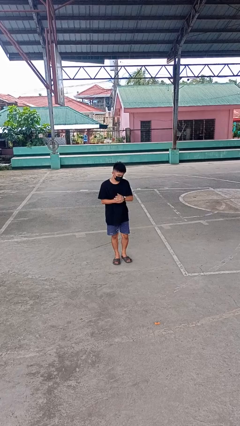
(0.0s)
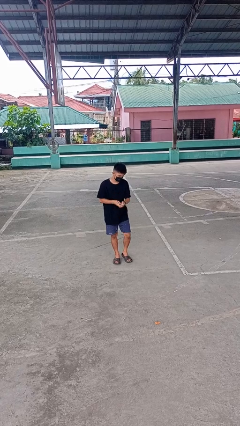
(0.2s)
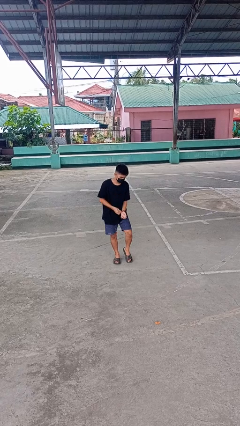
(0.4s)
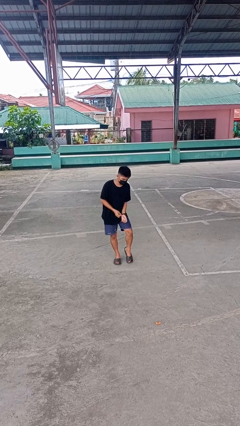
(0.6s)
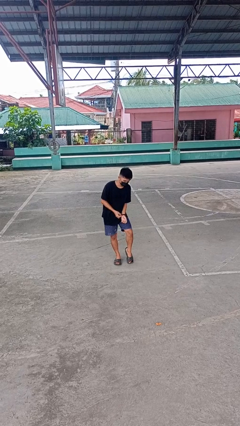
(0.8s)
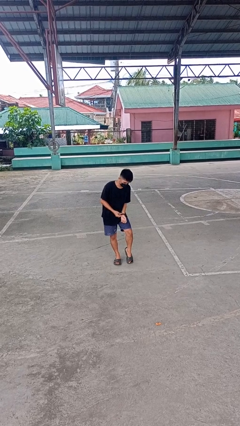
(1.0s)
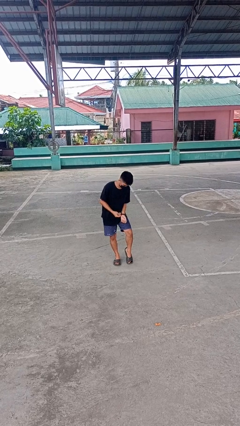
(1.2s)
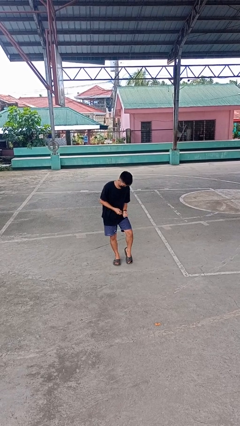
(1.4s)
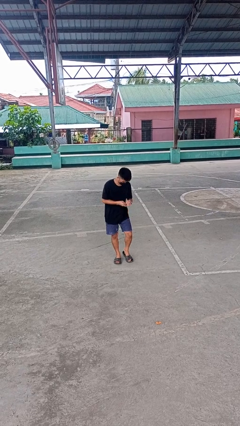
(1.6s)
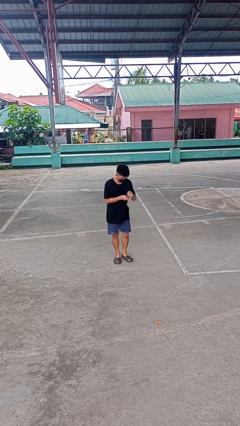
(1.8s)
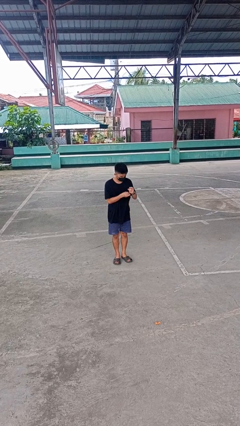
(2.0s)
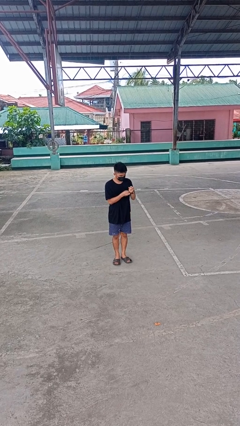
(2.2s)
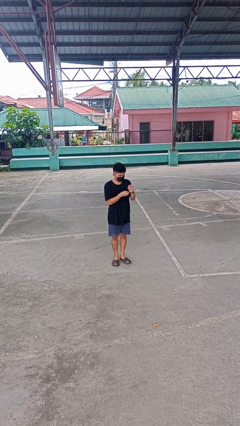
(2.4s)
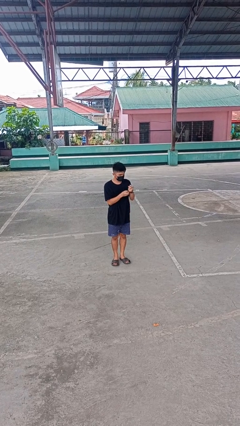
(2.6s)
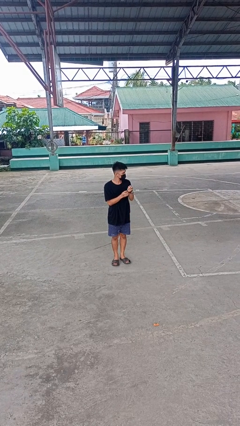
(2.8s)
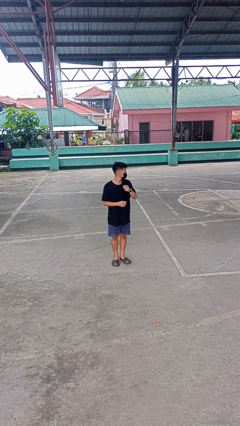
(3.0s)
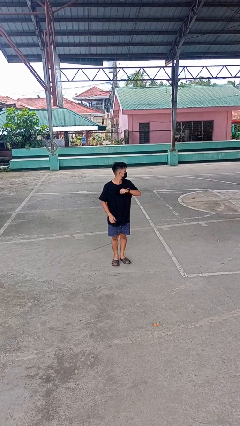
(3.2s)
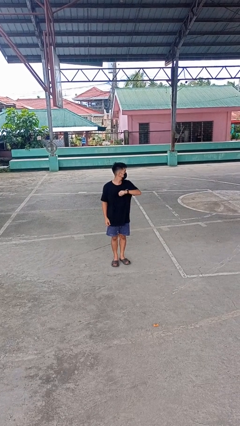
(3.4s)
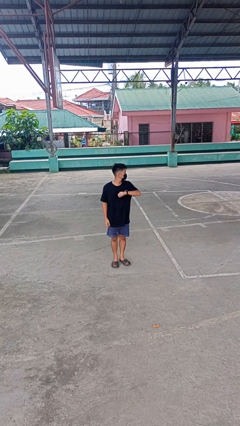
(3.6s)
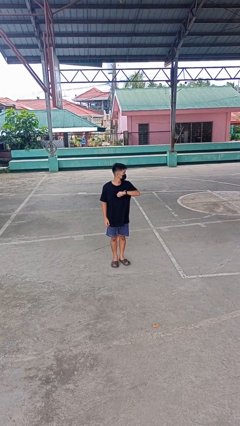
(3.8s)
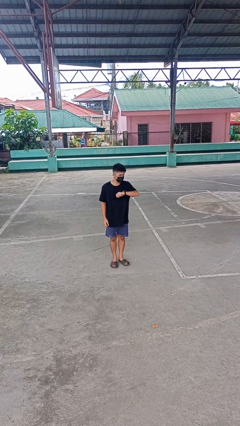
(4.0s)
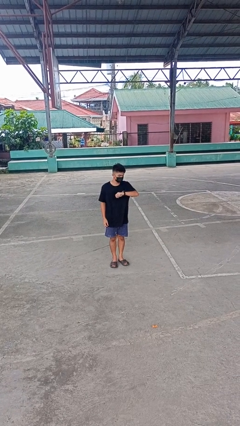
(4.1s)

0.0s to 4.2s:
person puts on wristwatch

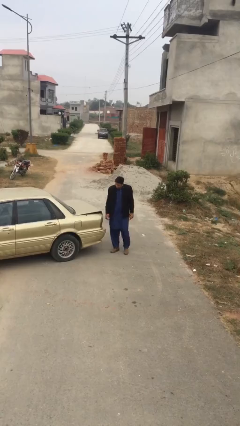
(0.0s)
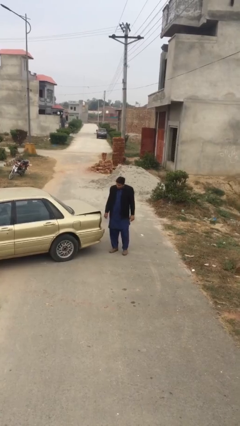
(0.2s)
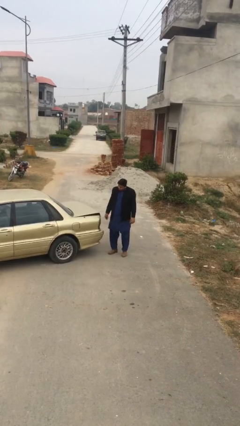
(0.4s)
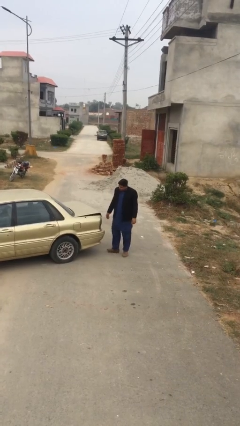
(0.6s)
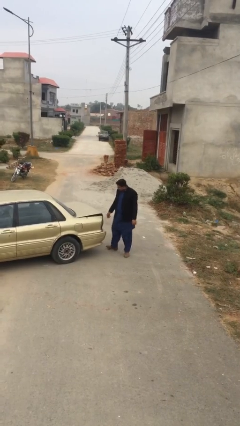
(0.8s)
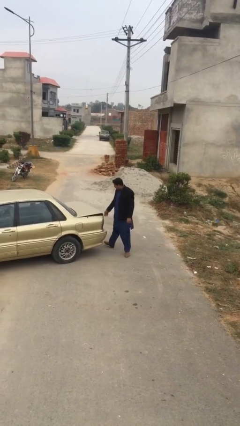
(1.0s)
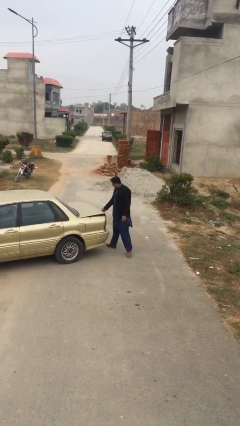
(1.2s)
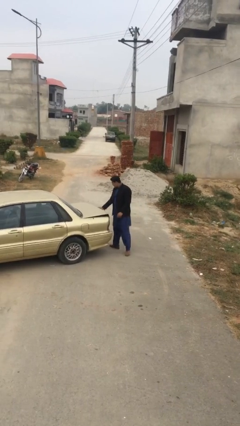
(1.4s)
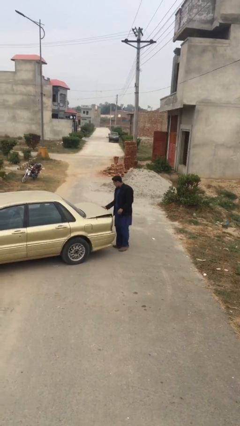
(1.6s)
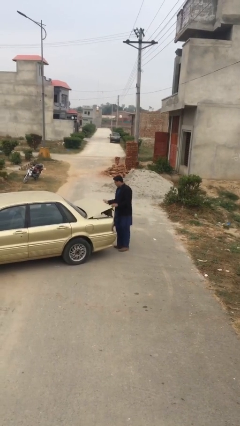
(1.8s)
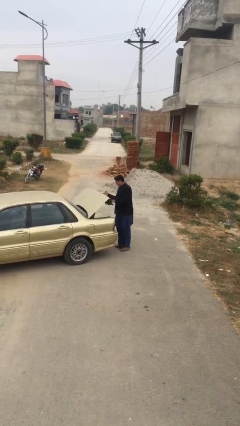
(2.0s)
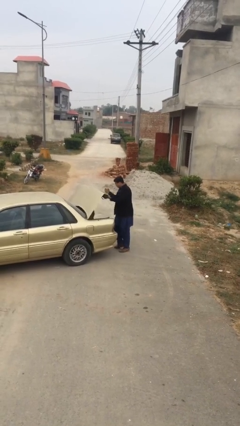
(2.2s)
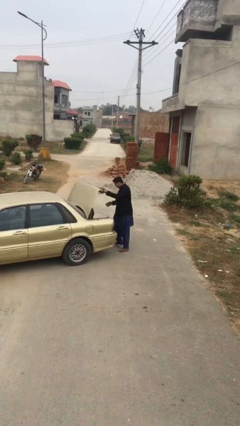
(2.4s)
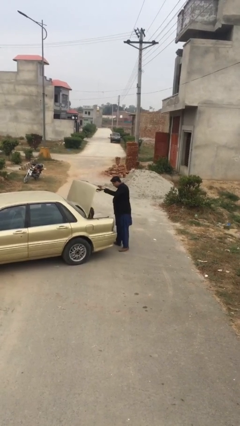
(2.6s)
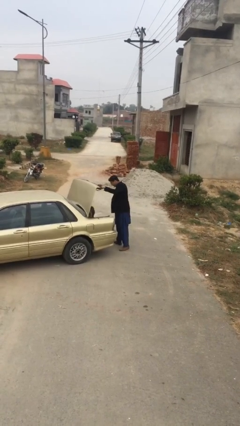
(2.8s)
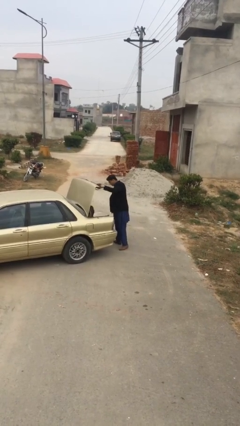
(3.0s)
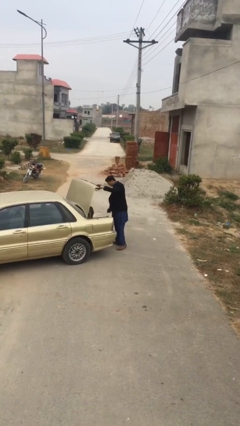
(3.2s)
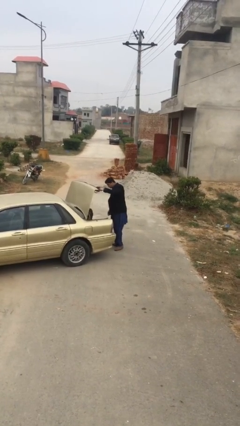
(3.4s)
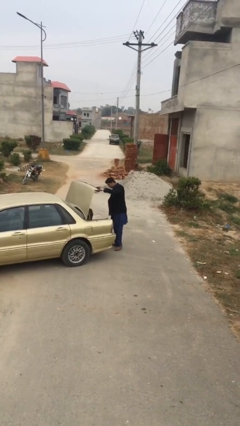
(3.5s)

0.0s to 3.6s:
person opens car trunk

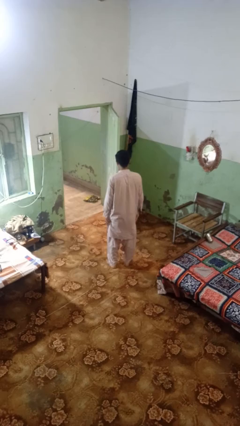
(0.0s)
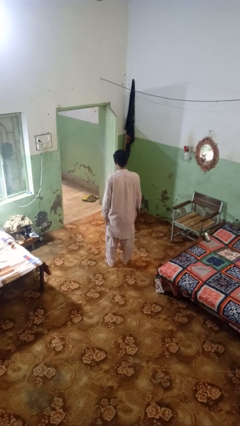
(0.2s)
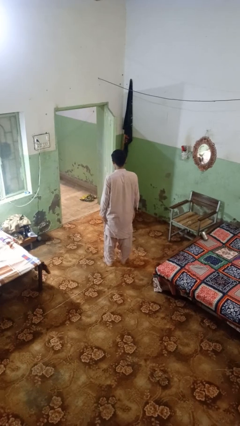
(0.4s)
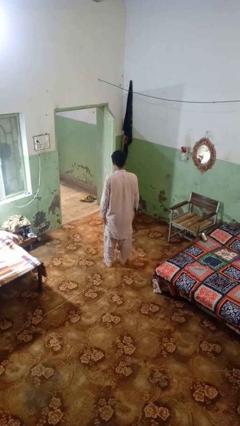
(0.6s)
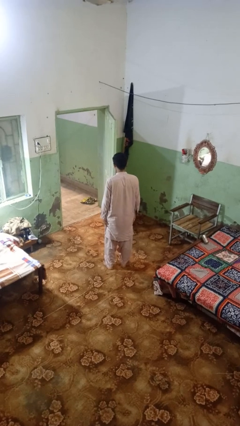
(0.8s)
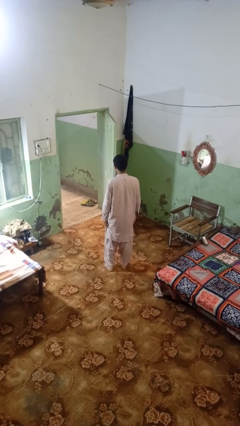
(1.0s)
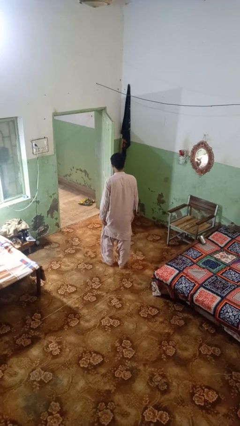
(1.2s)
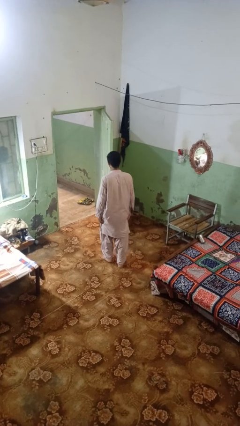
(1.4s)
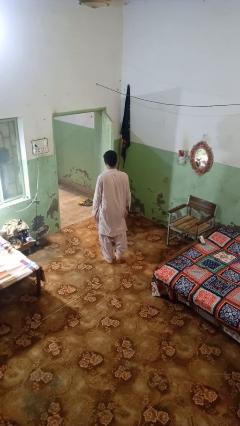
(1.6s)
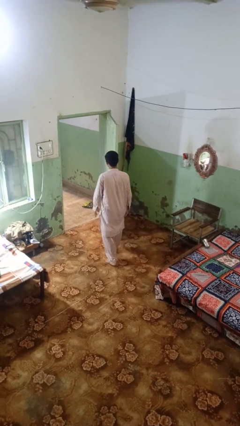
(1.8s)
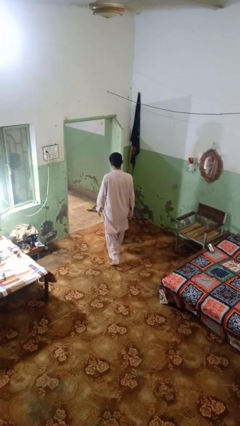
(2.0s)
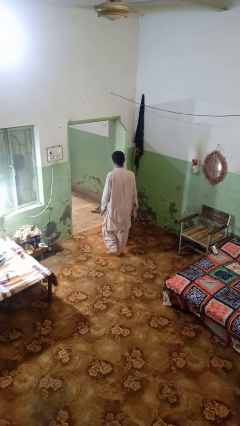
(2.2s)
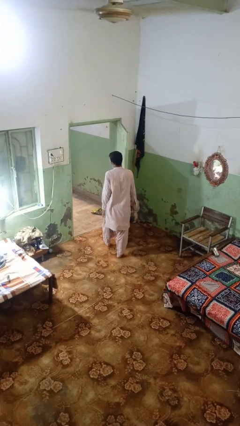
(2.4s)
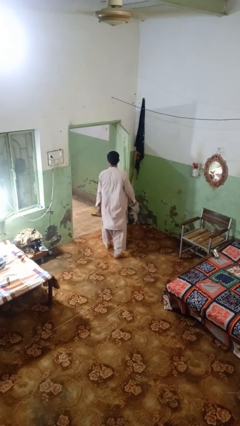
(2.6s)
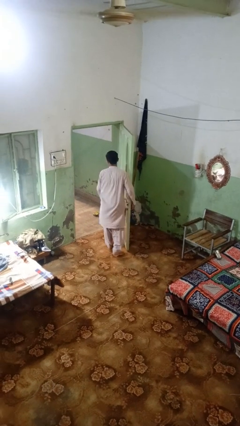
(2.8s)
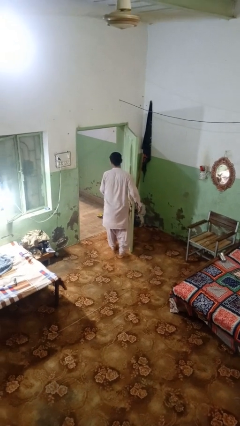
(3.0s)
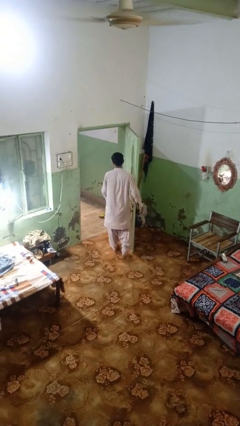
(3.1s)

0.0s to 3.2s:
person bumps into wall

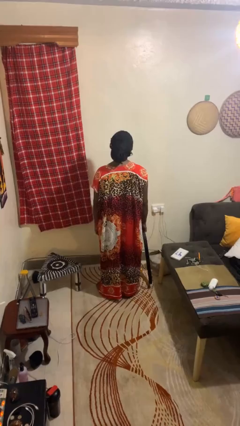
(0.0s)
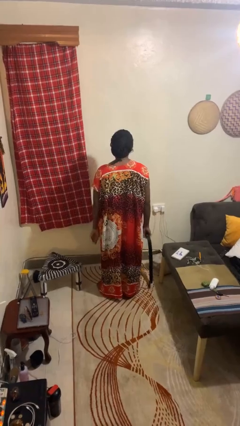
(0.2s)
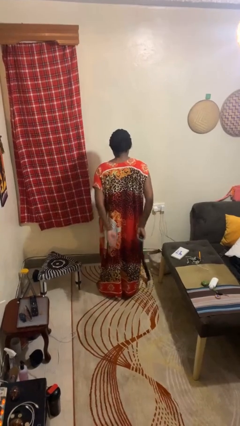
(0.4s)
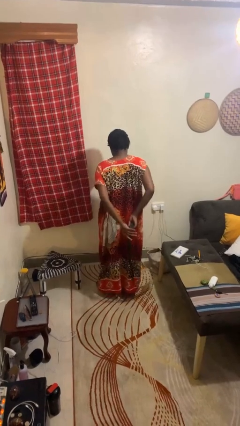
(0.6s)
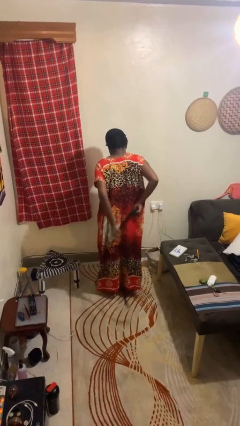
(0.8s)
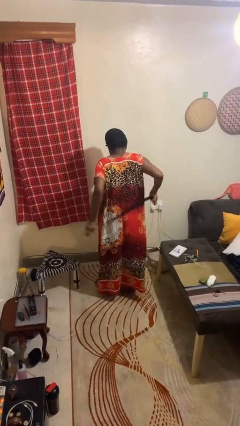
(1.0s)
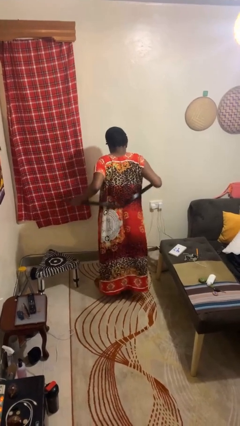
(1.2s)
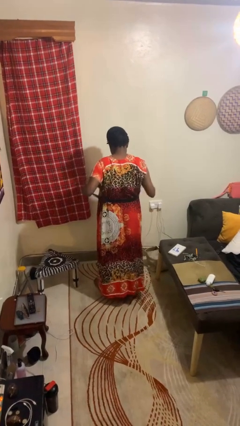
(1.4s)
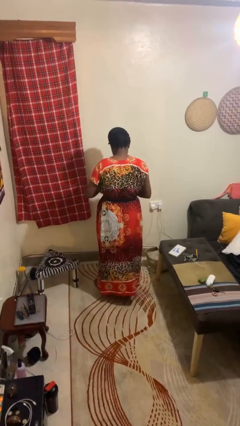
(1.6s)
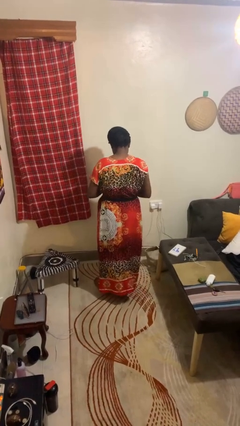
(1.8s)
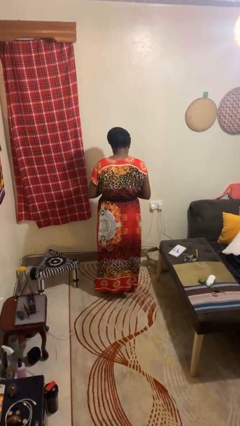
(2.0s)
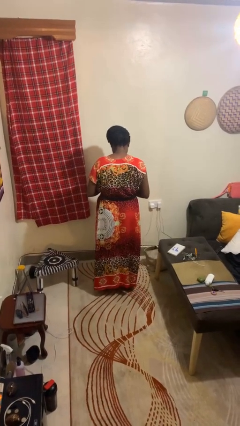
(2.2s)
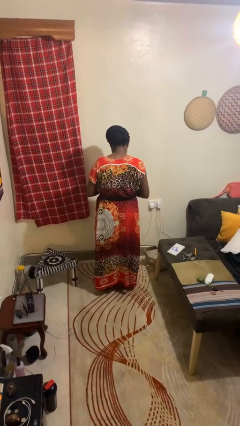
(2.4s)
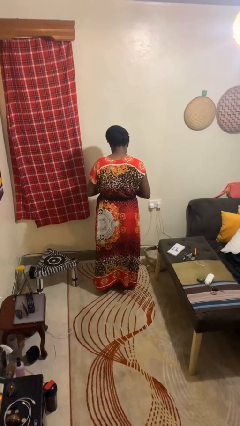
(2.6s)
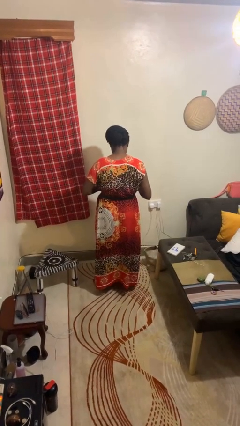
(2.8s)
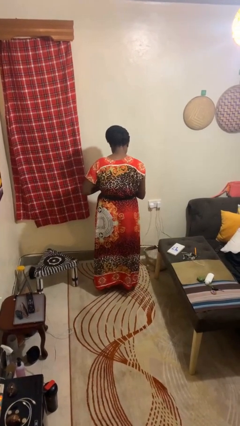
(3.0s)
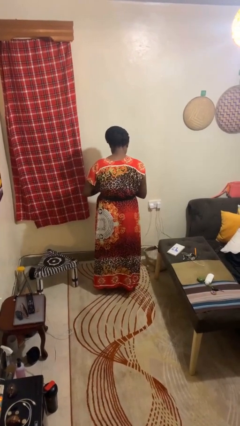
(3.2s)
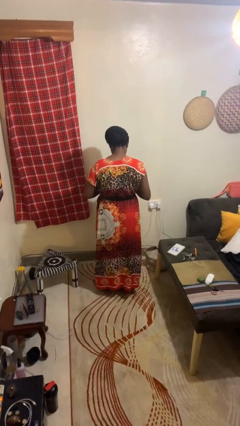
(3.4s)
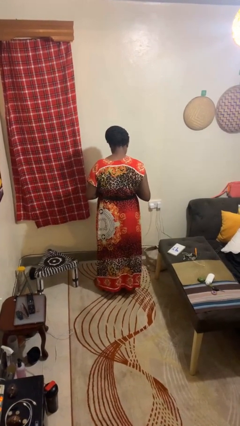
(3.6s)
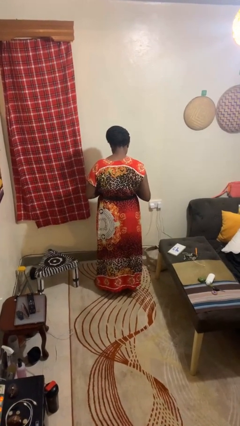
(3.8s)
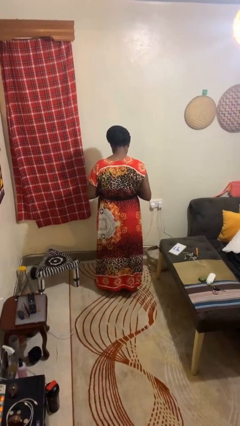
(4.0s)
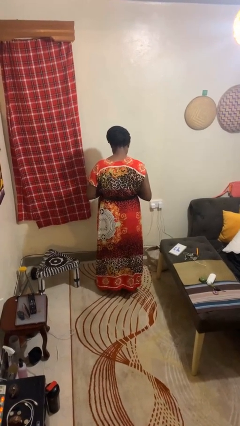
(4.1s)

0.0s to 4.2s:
person puts on belt

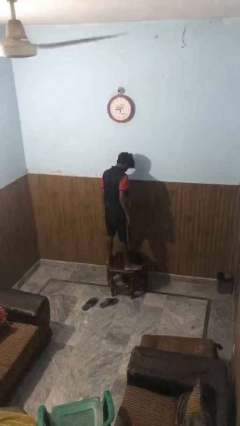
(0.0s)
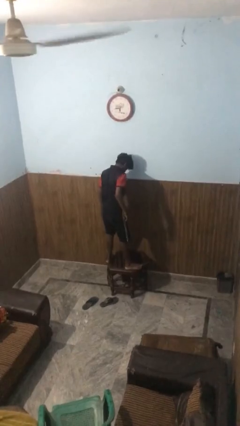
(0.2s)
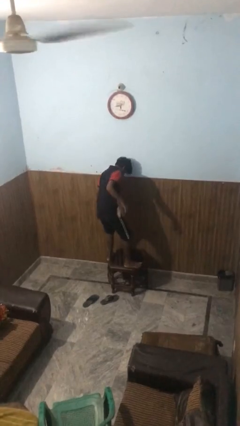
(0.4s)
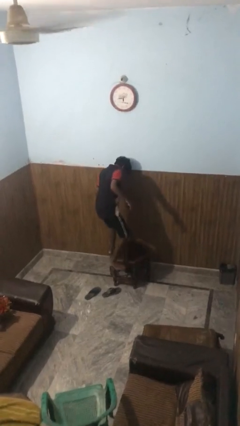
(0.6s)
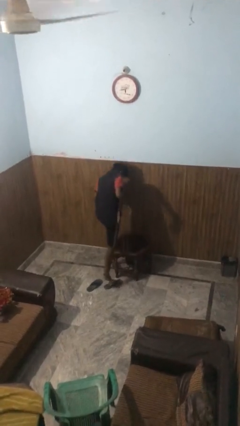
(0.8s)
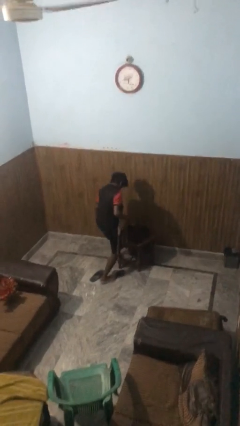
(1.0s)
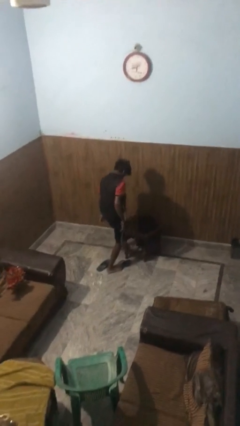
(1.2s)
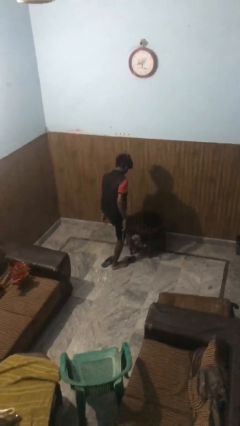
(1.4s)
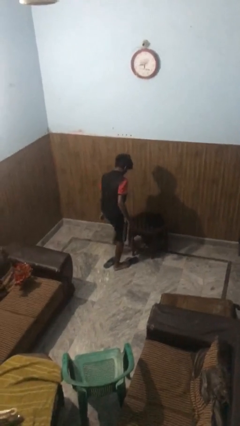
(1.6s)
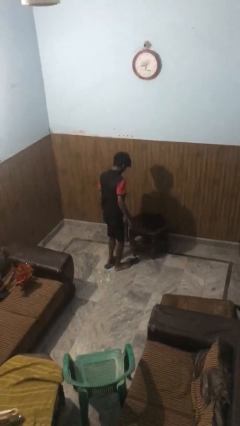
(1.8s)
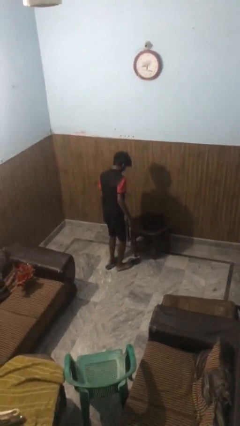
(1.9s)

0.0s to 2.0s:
person climbs off table

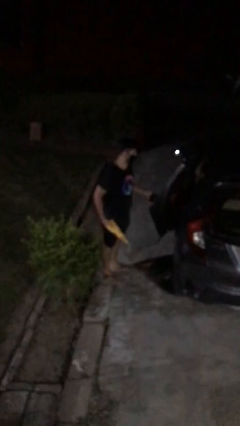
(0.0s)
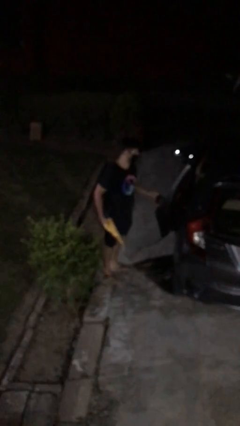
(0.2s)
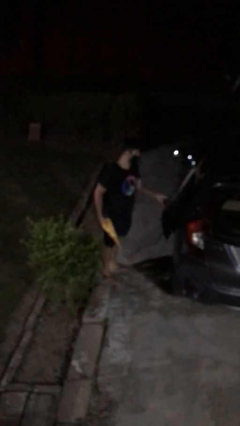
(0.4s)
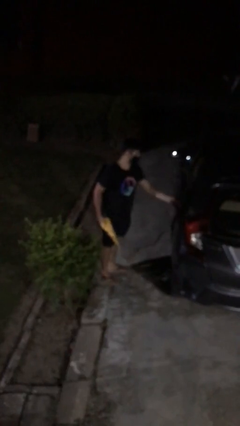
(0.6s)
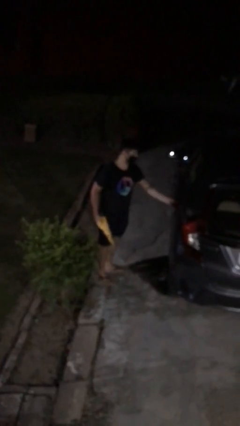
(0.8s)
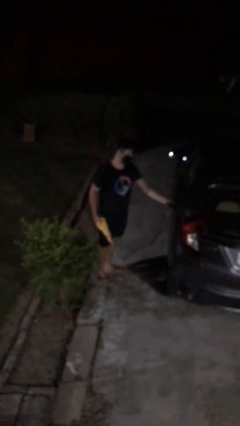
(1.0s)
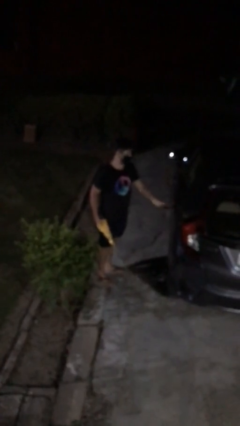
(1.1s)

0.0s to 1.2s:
person closes car door
